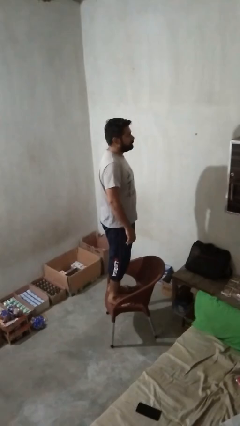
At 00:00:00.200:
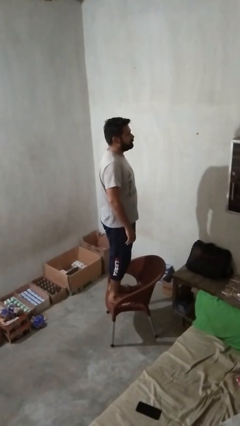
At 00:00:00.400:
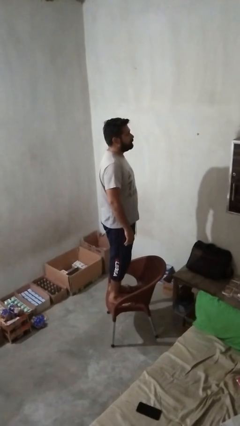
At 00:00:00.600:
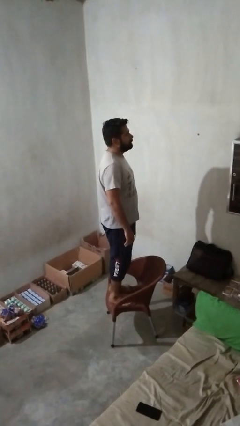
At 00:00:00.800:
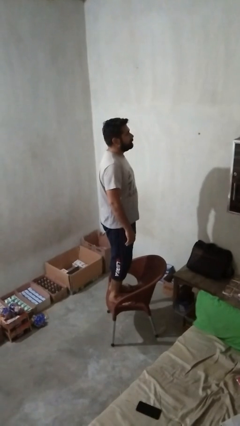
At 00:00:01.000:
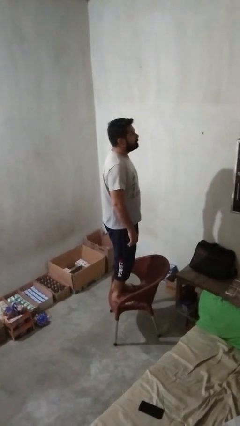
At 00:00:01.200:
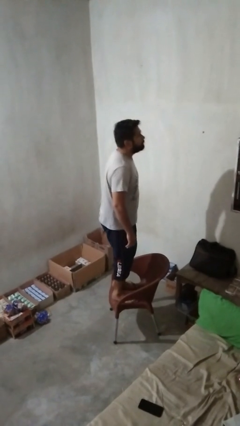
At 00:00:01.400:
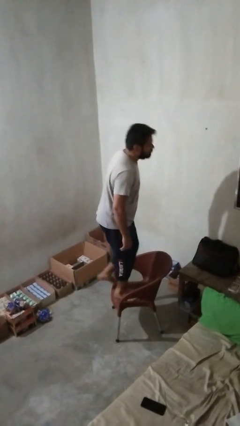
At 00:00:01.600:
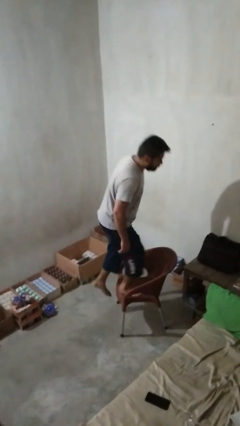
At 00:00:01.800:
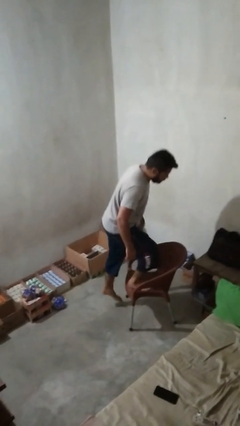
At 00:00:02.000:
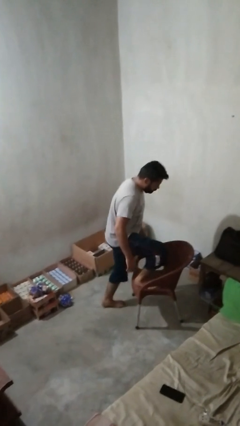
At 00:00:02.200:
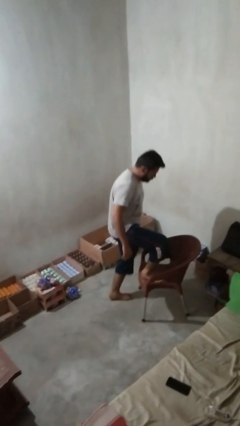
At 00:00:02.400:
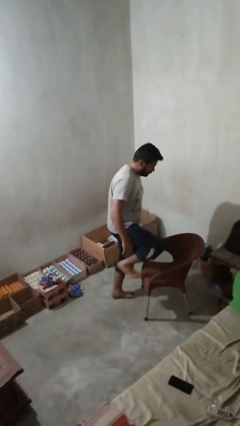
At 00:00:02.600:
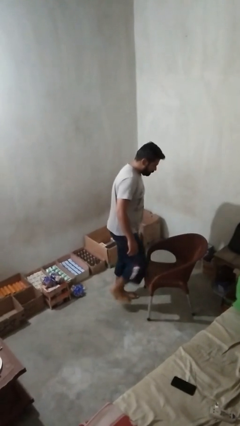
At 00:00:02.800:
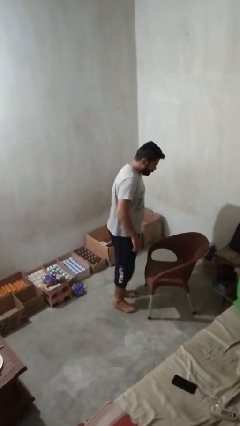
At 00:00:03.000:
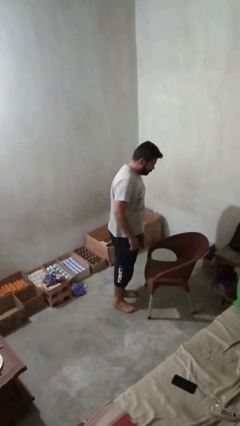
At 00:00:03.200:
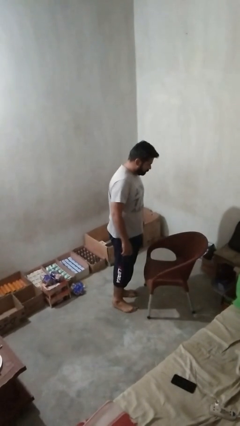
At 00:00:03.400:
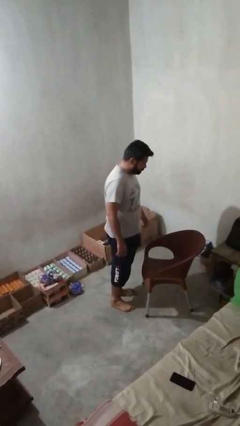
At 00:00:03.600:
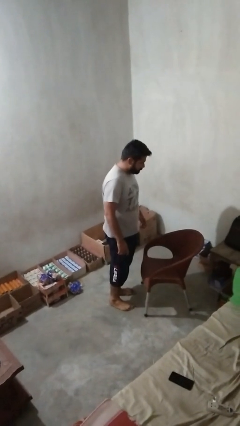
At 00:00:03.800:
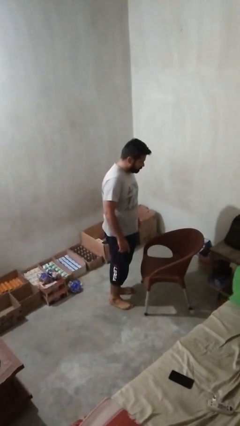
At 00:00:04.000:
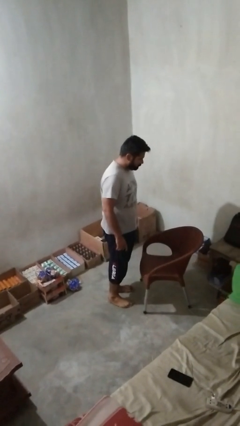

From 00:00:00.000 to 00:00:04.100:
person climbs off chair

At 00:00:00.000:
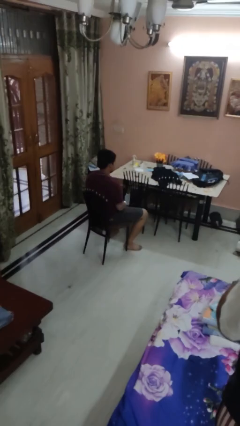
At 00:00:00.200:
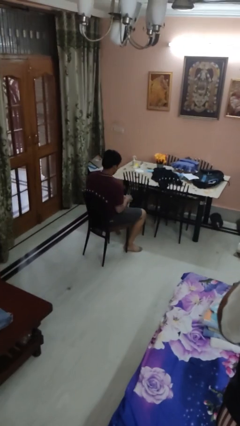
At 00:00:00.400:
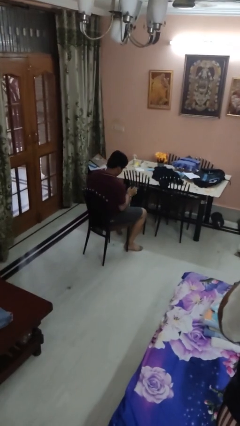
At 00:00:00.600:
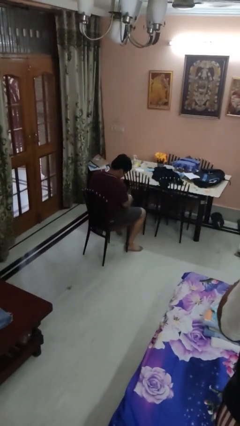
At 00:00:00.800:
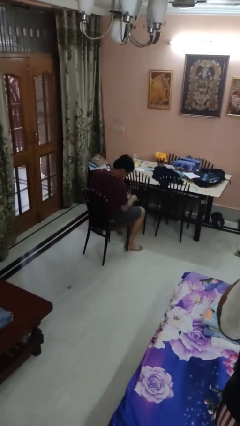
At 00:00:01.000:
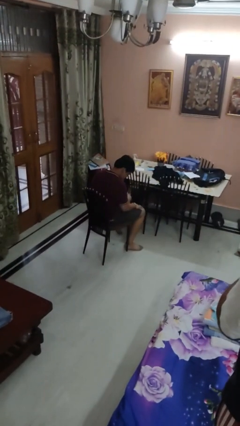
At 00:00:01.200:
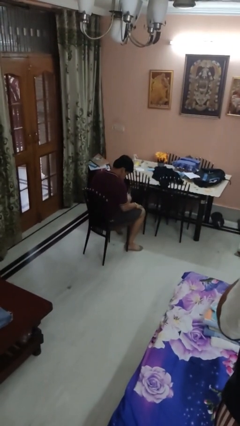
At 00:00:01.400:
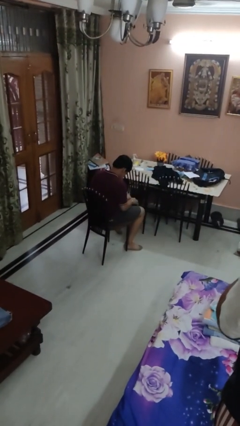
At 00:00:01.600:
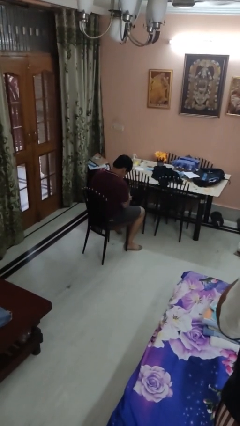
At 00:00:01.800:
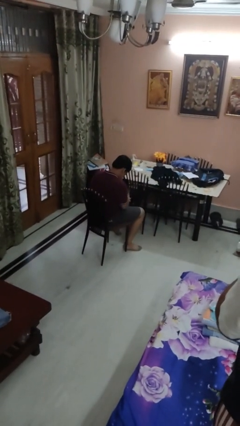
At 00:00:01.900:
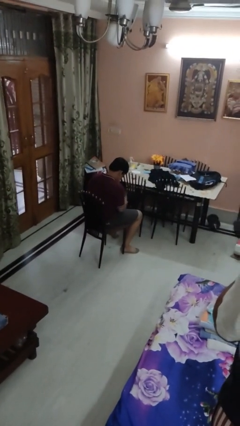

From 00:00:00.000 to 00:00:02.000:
person swats bug

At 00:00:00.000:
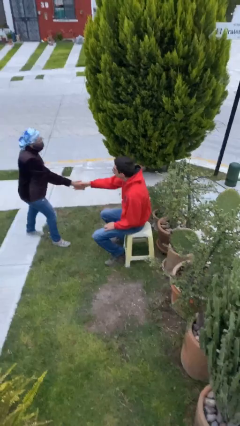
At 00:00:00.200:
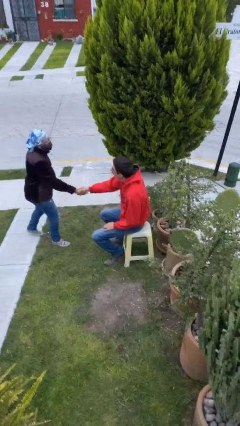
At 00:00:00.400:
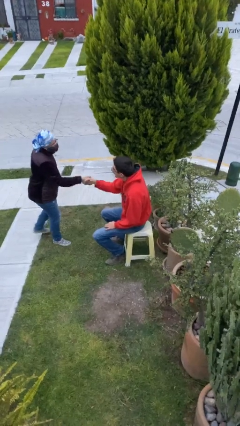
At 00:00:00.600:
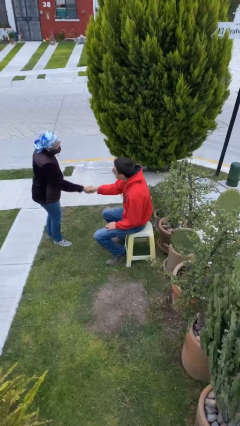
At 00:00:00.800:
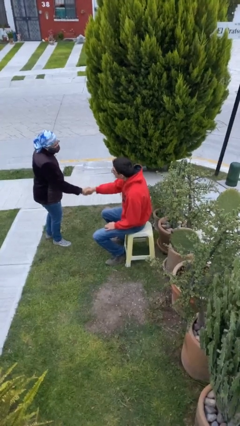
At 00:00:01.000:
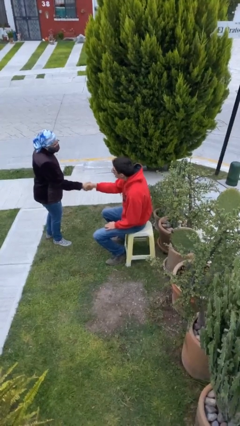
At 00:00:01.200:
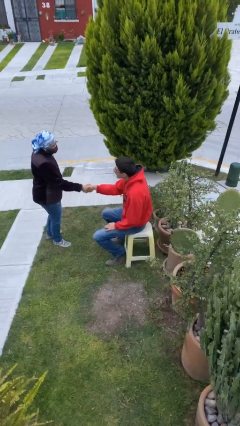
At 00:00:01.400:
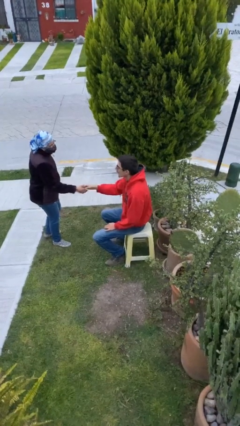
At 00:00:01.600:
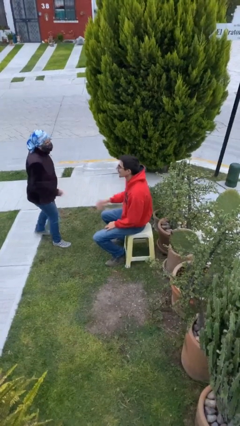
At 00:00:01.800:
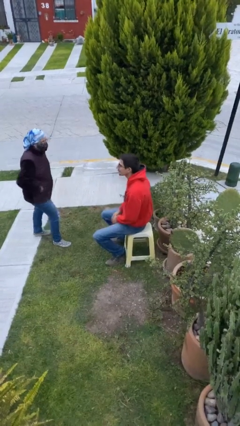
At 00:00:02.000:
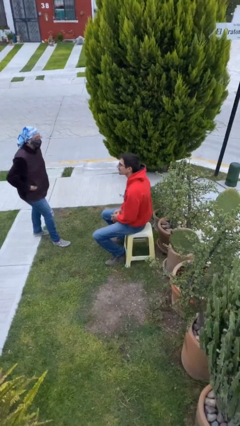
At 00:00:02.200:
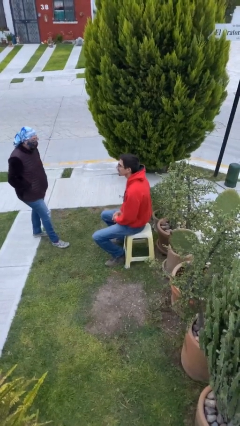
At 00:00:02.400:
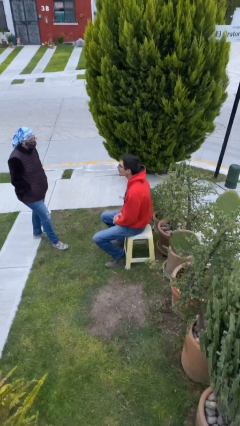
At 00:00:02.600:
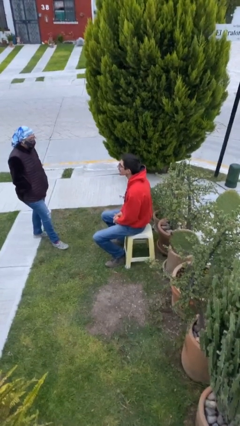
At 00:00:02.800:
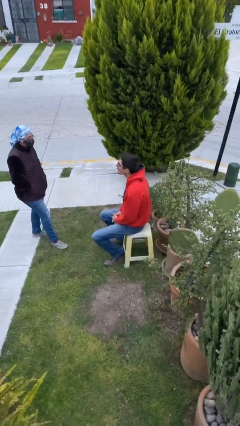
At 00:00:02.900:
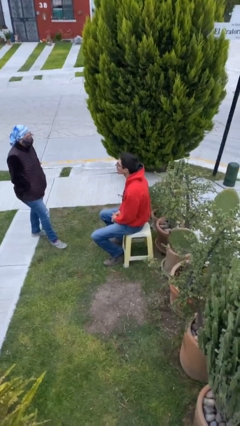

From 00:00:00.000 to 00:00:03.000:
person shakes hand

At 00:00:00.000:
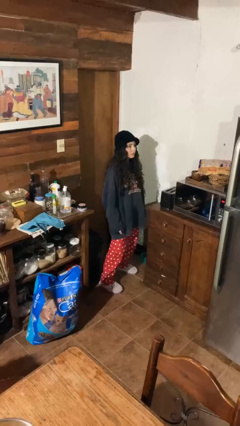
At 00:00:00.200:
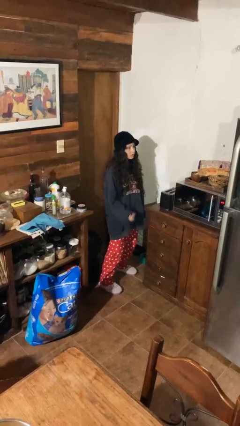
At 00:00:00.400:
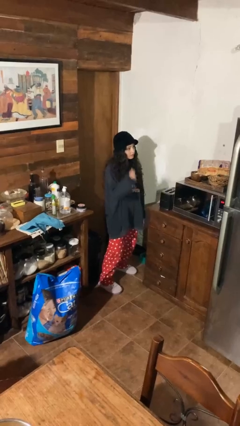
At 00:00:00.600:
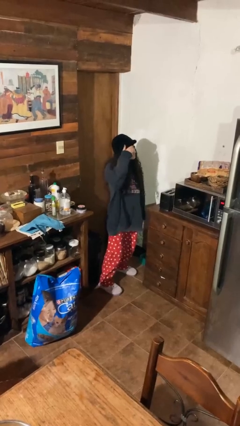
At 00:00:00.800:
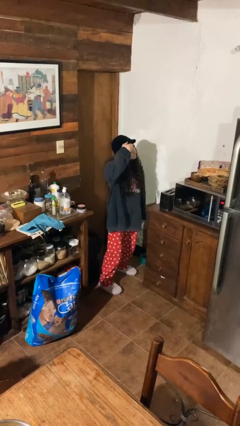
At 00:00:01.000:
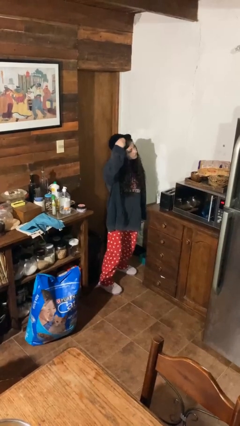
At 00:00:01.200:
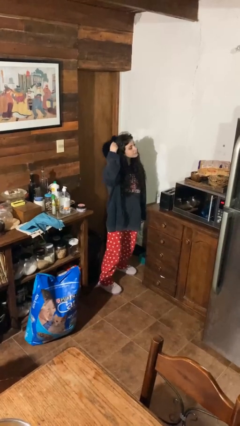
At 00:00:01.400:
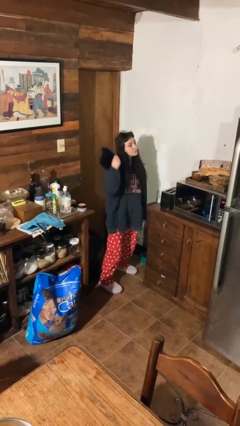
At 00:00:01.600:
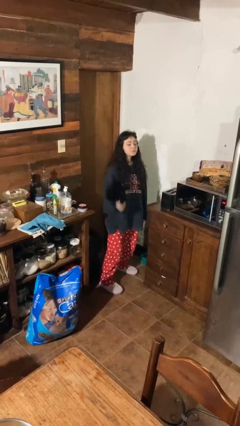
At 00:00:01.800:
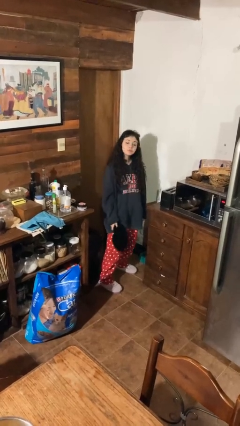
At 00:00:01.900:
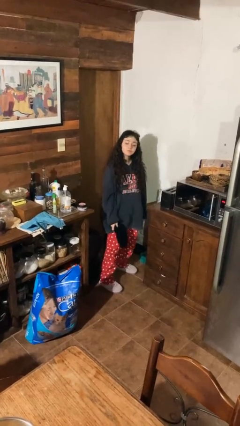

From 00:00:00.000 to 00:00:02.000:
person takes off hat

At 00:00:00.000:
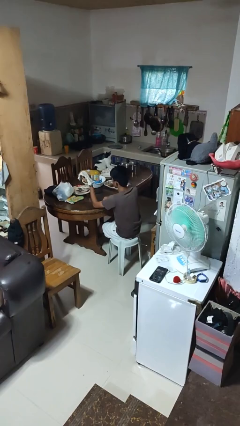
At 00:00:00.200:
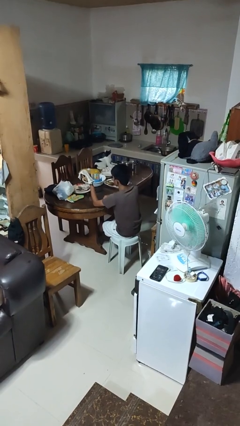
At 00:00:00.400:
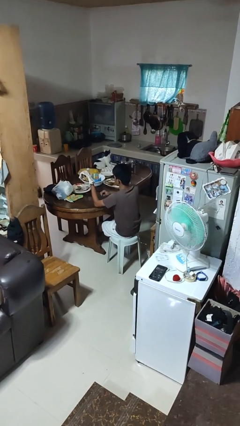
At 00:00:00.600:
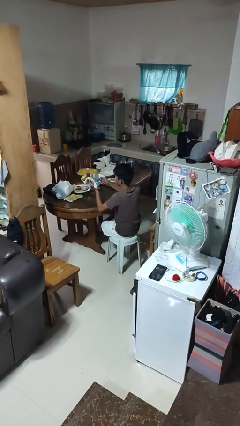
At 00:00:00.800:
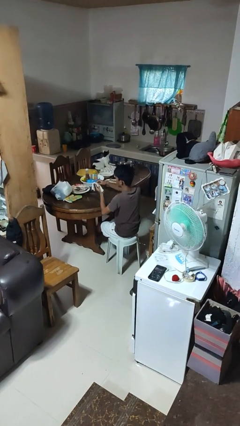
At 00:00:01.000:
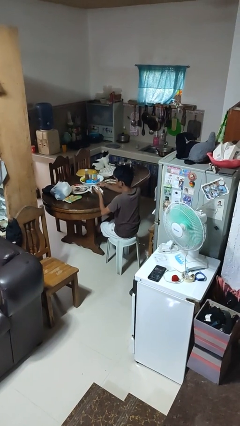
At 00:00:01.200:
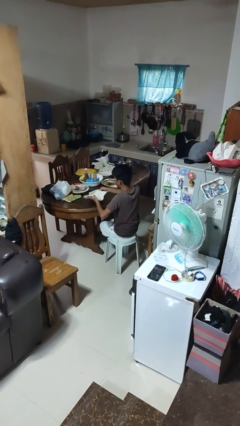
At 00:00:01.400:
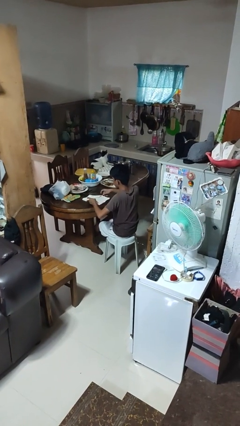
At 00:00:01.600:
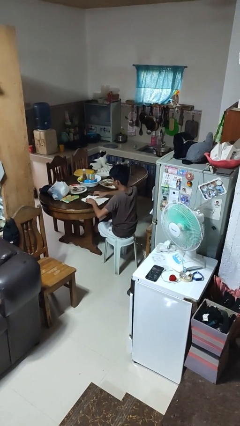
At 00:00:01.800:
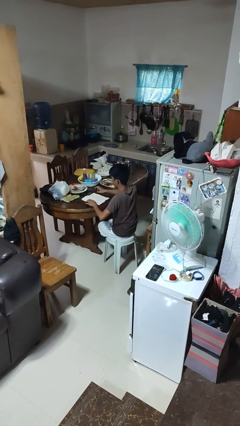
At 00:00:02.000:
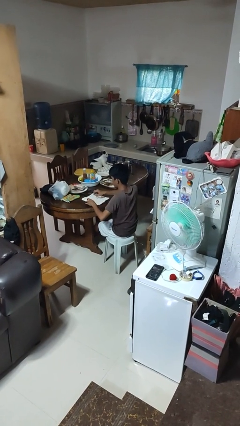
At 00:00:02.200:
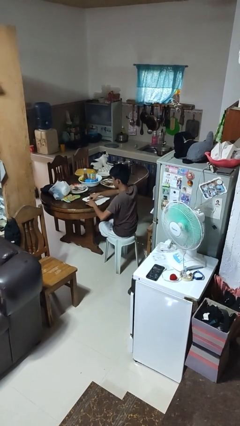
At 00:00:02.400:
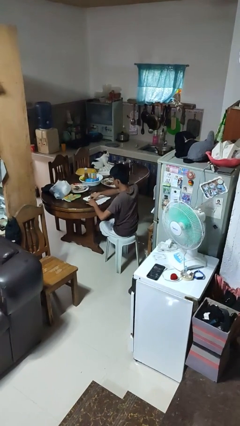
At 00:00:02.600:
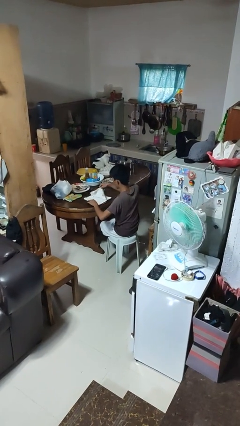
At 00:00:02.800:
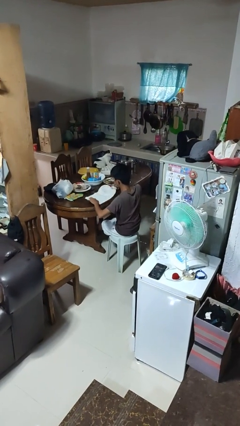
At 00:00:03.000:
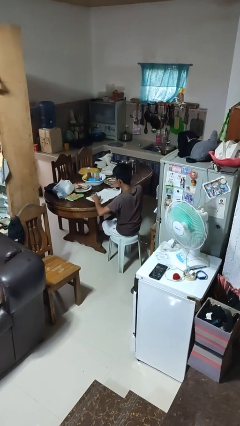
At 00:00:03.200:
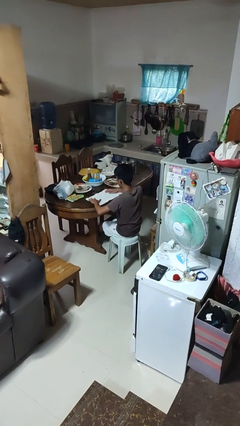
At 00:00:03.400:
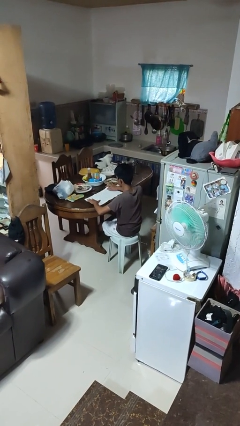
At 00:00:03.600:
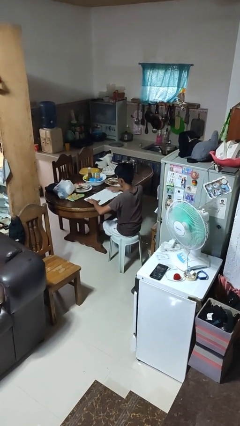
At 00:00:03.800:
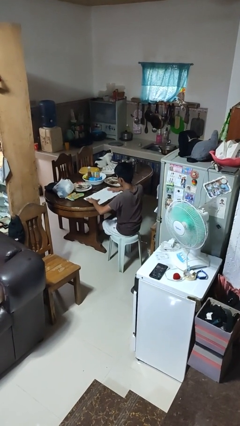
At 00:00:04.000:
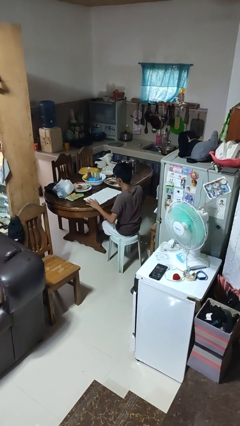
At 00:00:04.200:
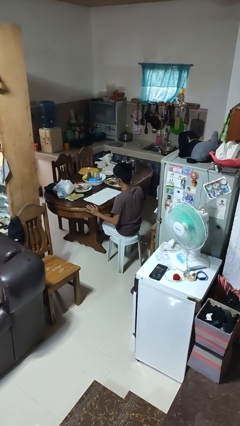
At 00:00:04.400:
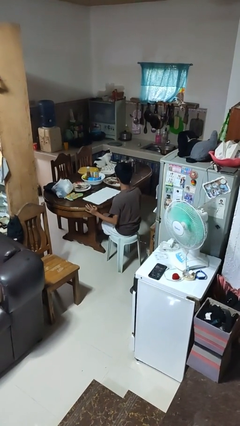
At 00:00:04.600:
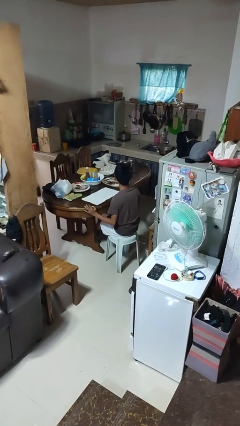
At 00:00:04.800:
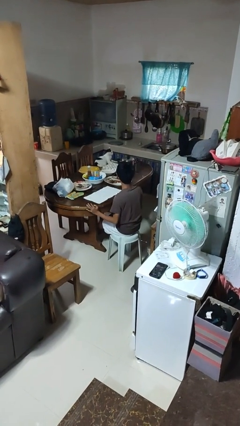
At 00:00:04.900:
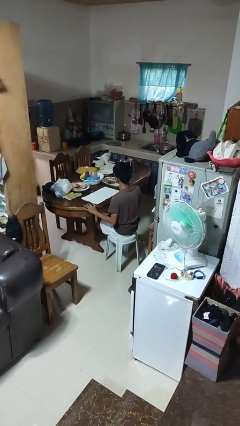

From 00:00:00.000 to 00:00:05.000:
person spreads tablecloth

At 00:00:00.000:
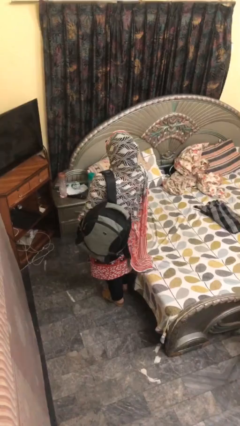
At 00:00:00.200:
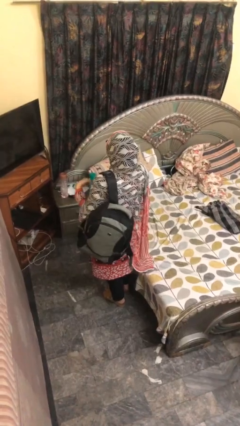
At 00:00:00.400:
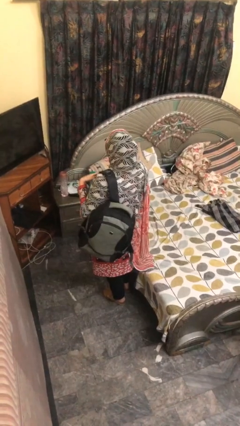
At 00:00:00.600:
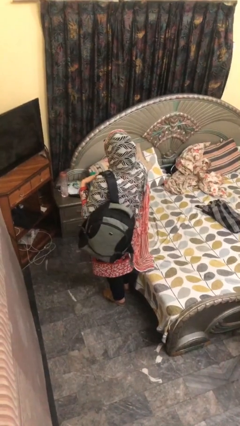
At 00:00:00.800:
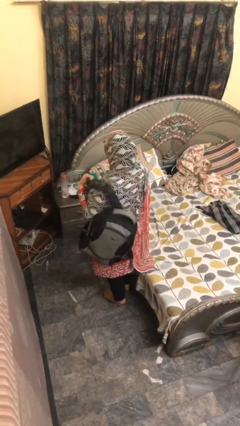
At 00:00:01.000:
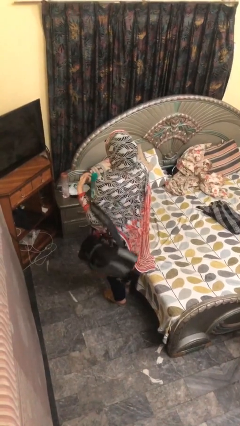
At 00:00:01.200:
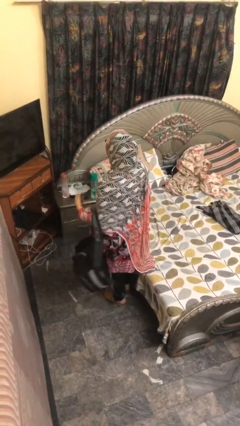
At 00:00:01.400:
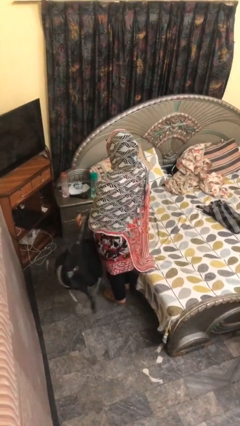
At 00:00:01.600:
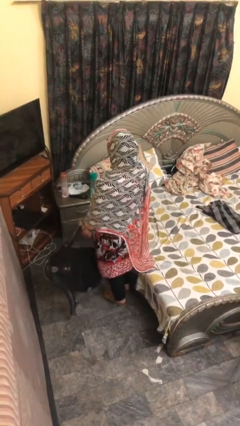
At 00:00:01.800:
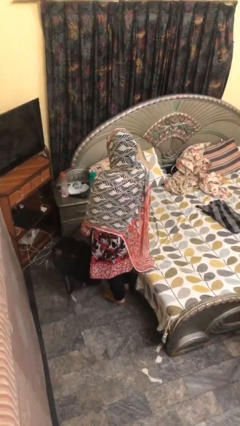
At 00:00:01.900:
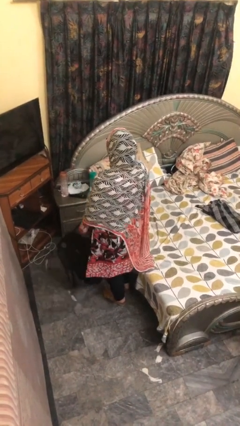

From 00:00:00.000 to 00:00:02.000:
person takes off backpack
